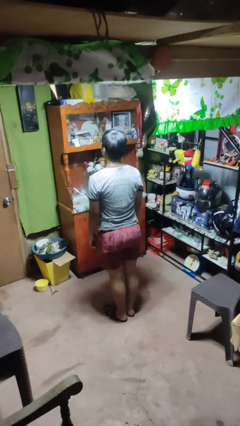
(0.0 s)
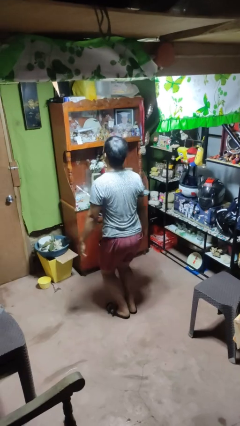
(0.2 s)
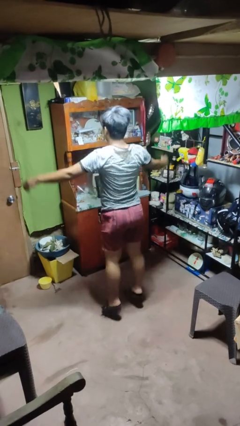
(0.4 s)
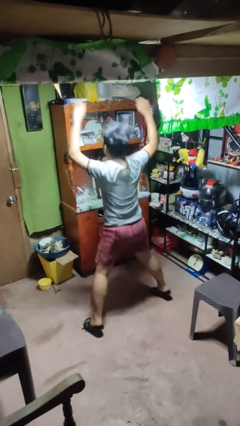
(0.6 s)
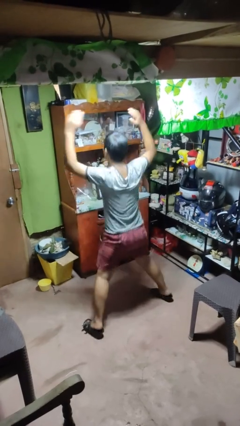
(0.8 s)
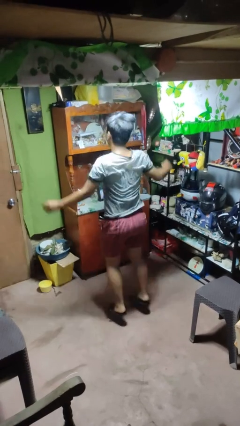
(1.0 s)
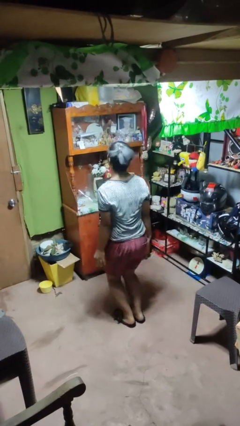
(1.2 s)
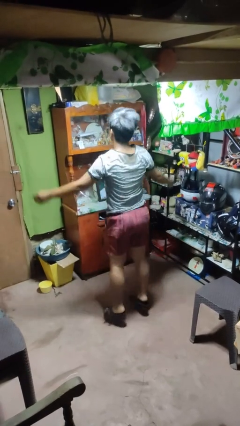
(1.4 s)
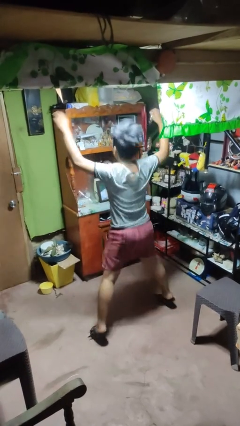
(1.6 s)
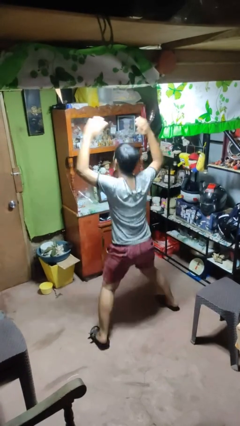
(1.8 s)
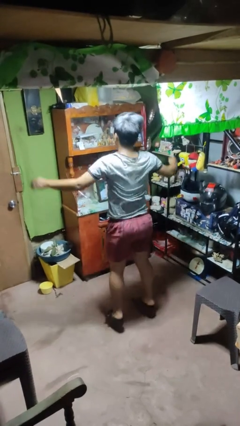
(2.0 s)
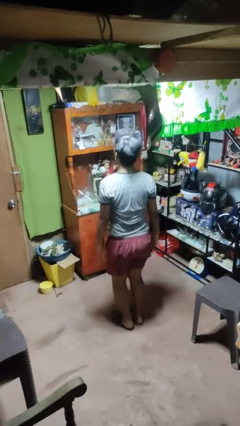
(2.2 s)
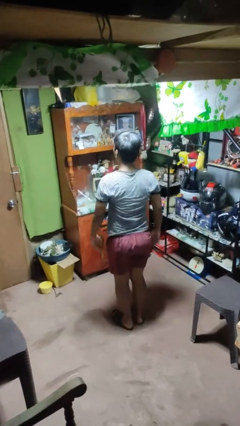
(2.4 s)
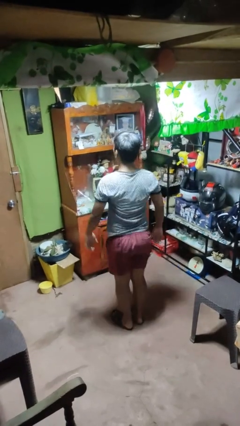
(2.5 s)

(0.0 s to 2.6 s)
person exercises with jumping jacks

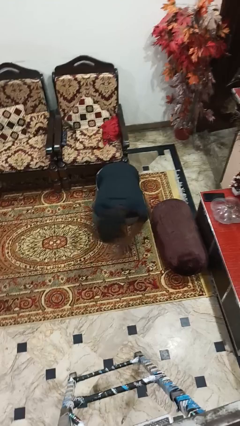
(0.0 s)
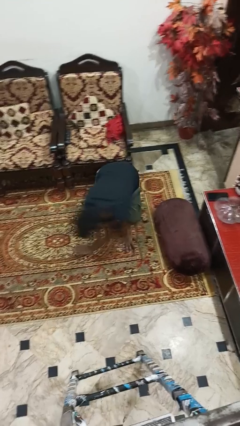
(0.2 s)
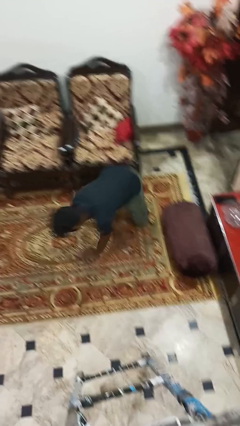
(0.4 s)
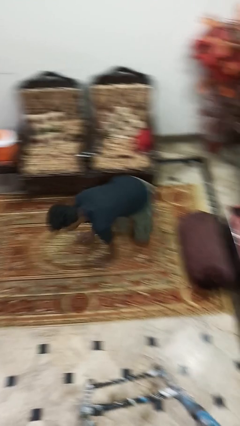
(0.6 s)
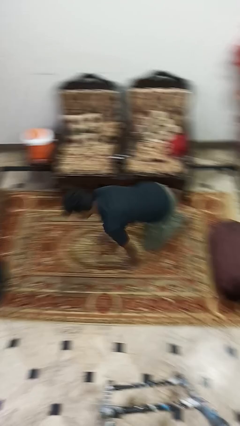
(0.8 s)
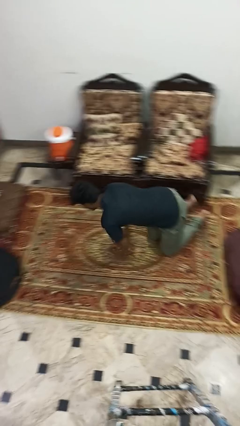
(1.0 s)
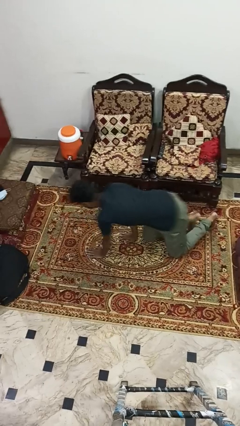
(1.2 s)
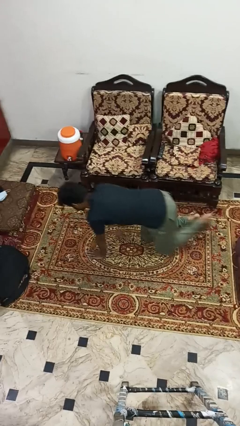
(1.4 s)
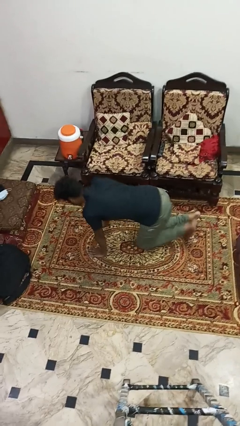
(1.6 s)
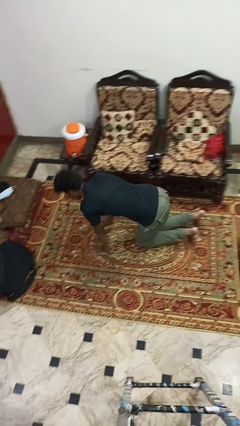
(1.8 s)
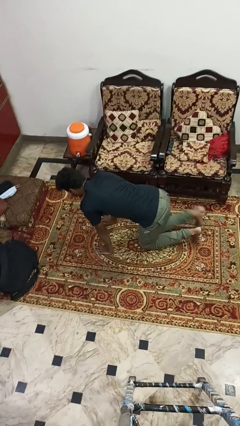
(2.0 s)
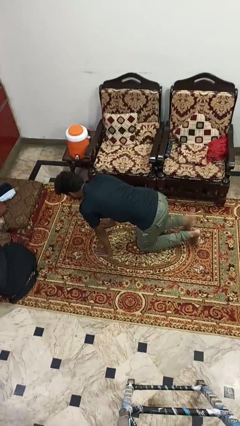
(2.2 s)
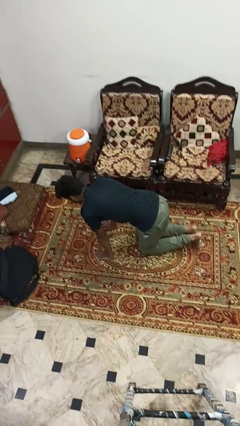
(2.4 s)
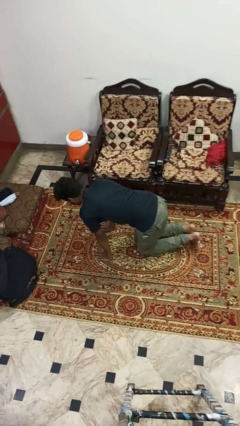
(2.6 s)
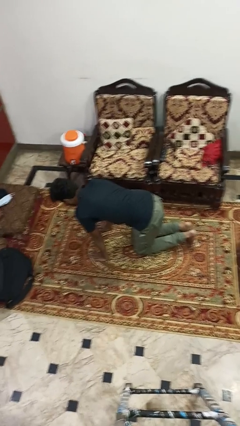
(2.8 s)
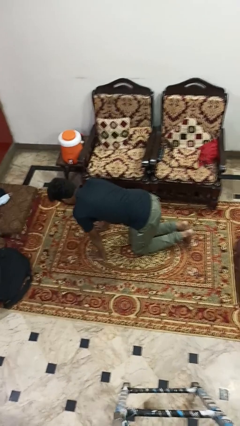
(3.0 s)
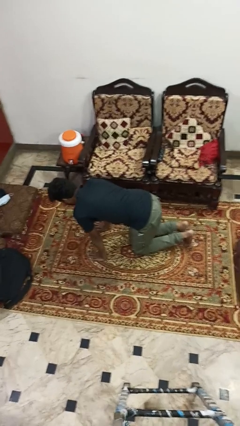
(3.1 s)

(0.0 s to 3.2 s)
person crawls

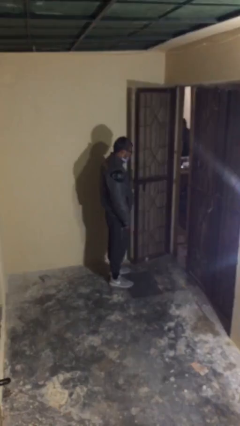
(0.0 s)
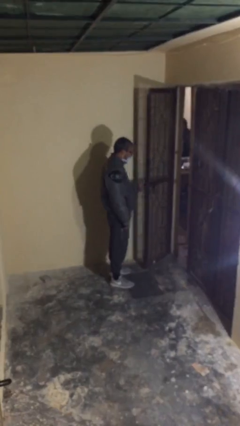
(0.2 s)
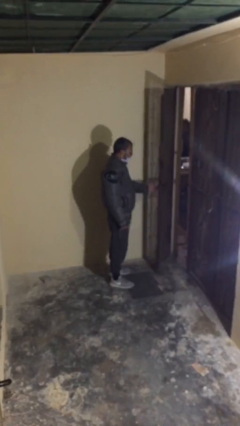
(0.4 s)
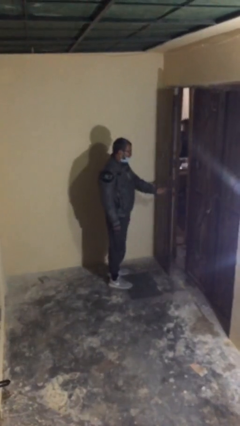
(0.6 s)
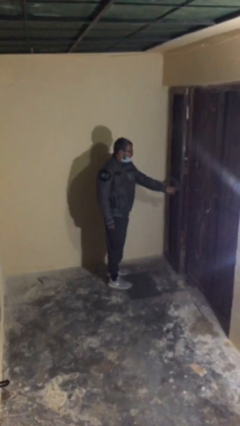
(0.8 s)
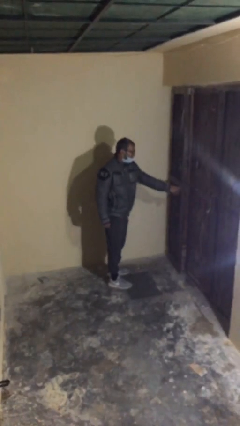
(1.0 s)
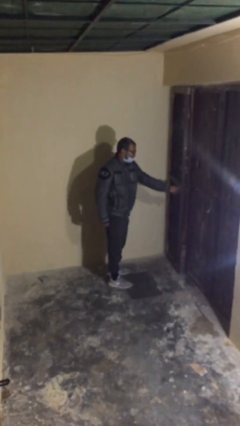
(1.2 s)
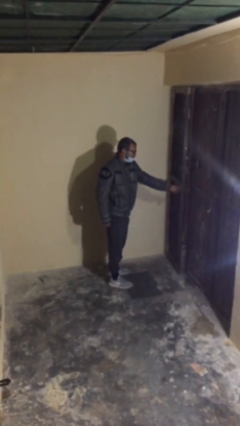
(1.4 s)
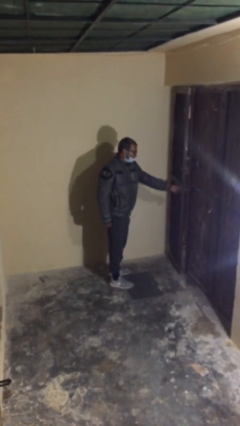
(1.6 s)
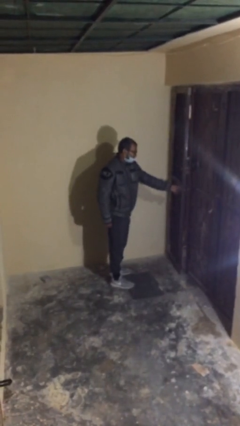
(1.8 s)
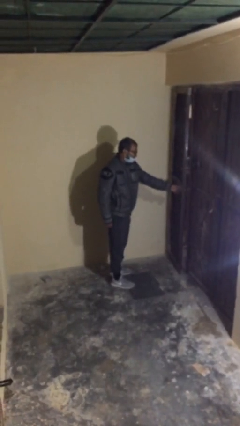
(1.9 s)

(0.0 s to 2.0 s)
person closes facility door

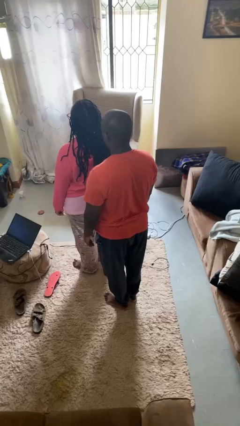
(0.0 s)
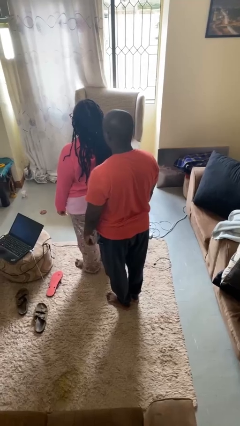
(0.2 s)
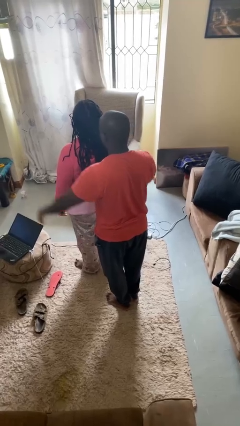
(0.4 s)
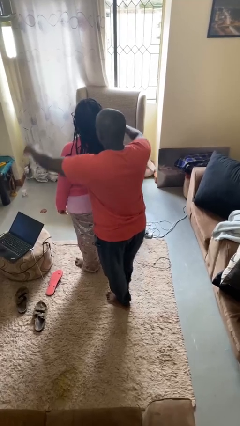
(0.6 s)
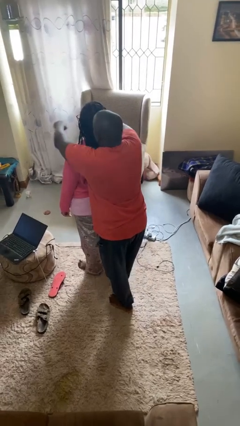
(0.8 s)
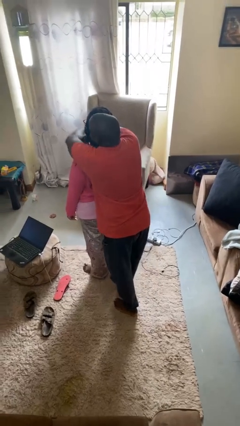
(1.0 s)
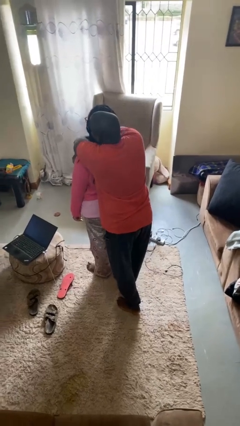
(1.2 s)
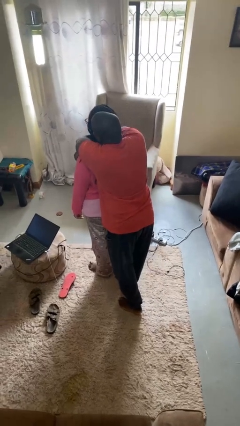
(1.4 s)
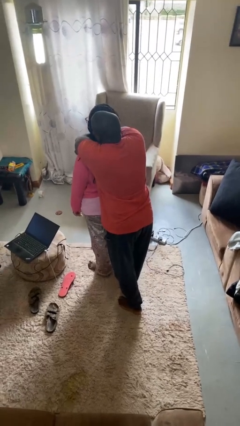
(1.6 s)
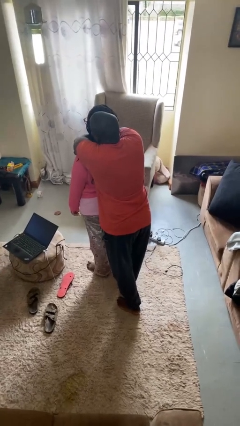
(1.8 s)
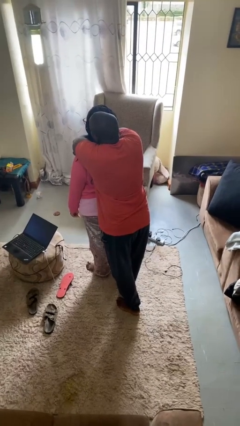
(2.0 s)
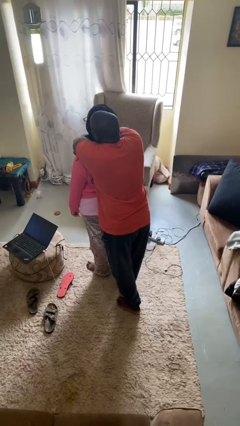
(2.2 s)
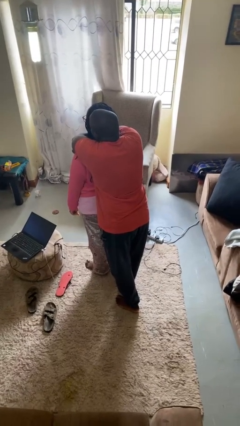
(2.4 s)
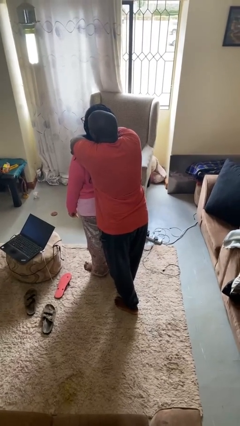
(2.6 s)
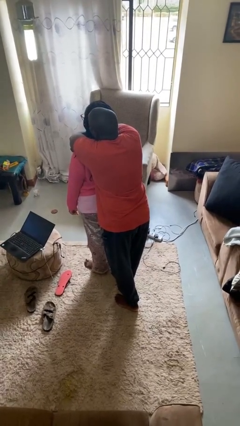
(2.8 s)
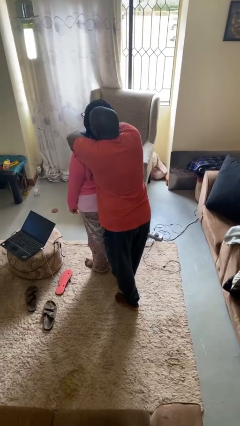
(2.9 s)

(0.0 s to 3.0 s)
person hugs person from behind

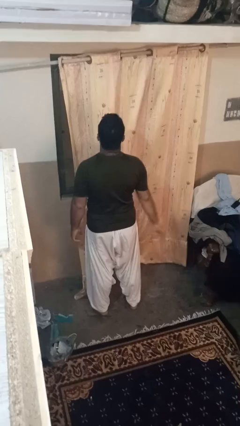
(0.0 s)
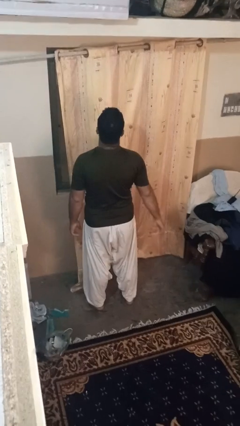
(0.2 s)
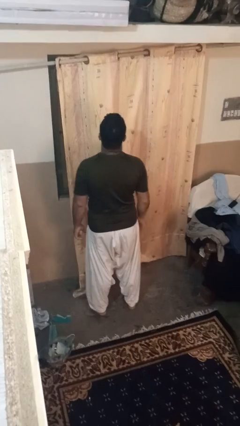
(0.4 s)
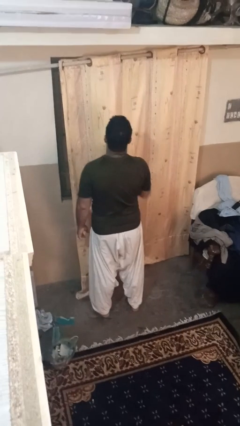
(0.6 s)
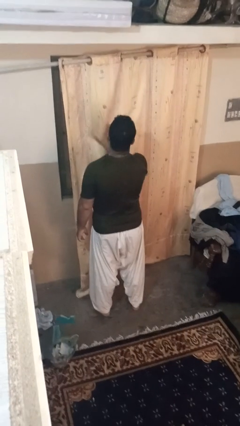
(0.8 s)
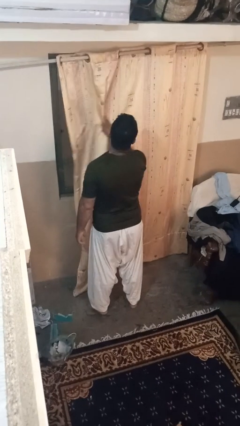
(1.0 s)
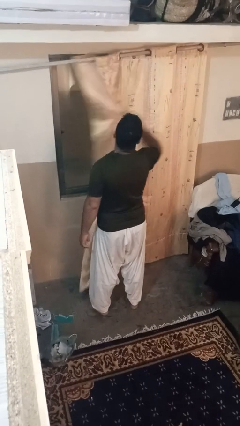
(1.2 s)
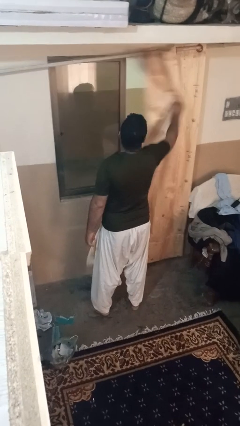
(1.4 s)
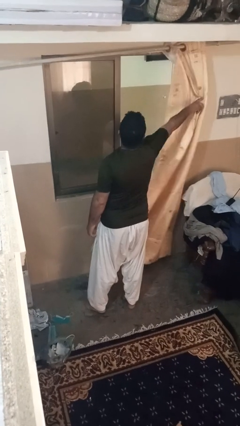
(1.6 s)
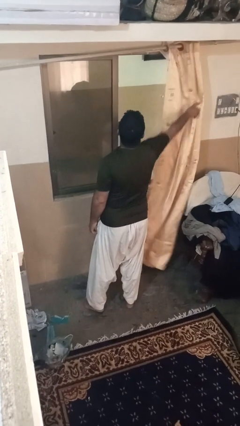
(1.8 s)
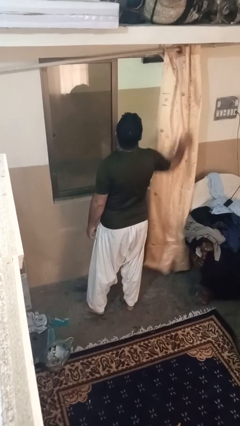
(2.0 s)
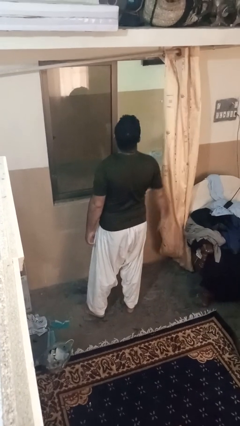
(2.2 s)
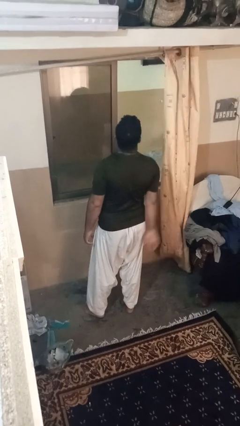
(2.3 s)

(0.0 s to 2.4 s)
person opens curtains

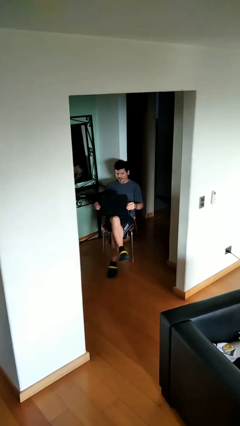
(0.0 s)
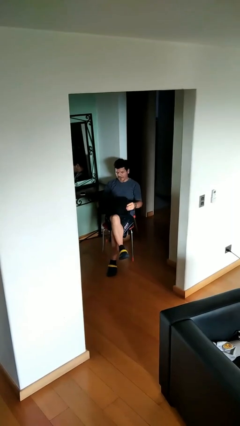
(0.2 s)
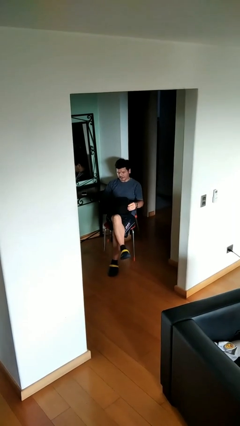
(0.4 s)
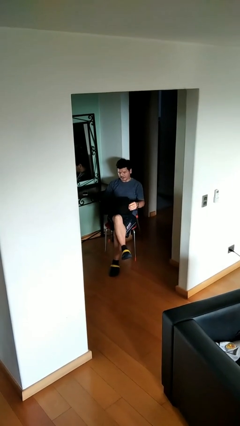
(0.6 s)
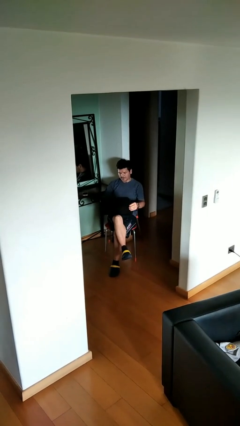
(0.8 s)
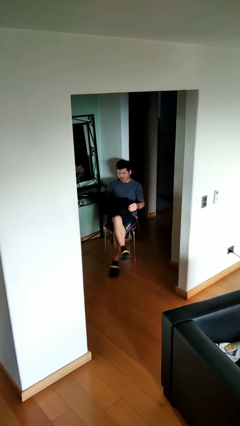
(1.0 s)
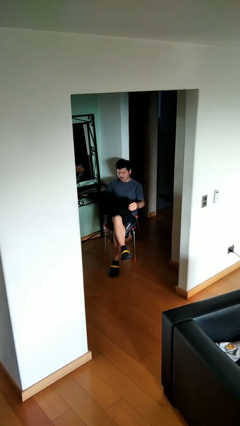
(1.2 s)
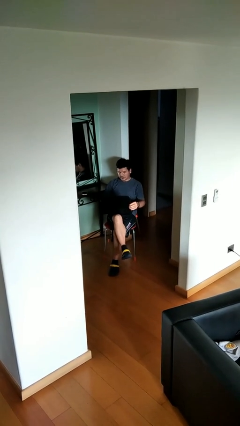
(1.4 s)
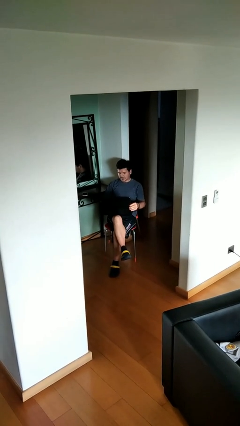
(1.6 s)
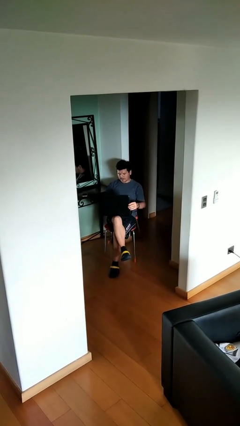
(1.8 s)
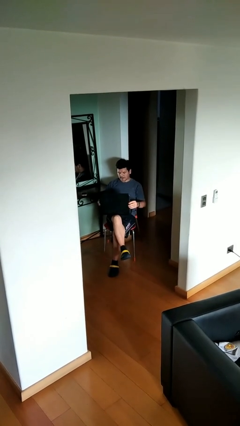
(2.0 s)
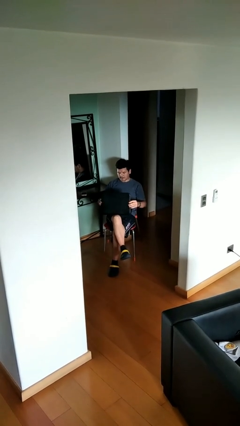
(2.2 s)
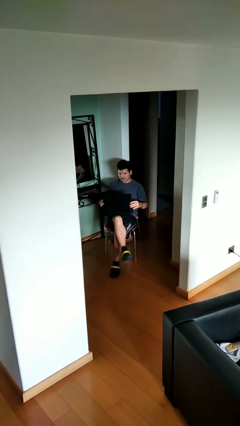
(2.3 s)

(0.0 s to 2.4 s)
person interacts with laptop

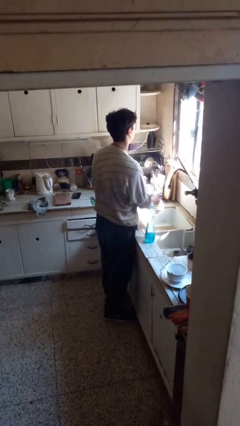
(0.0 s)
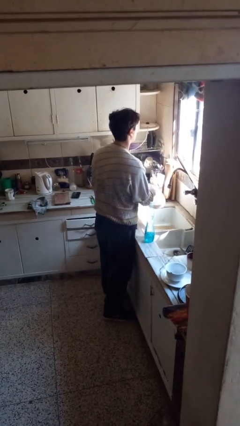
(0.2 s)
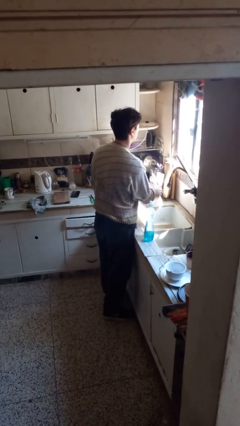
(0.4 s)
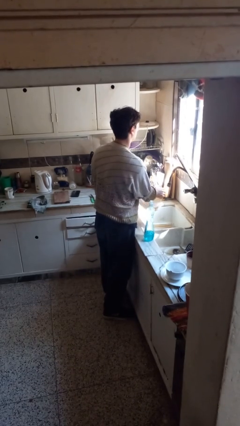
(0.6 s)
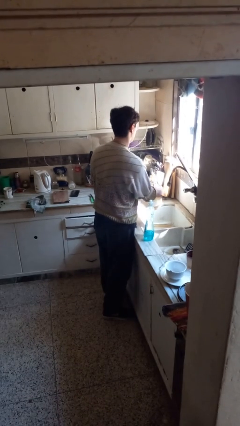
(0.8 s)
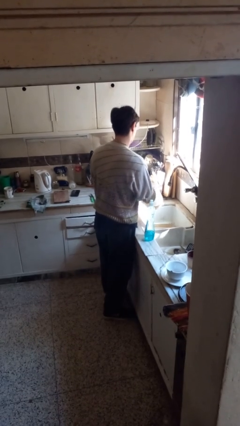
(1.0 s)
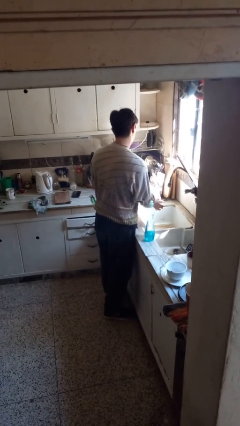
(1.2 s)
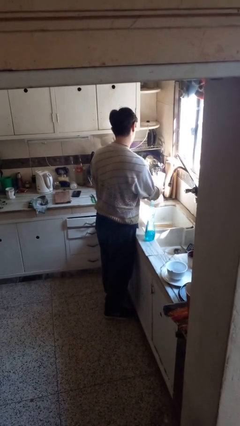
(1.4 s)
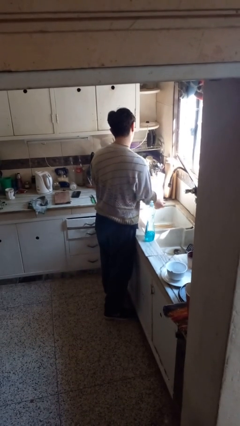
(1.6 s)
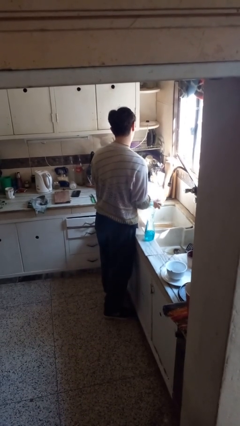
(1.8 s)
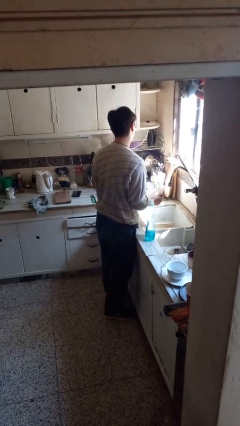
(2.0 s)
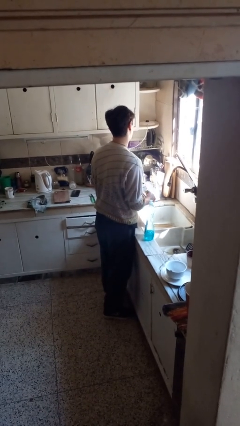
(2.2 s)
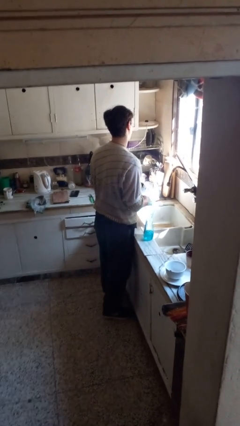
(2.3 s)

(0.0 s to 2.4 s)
person washes dish
